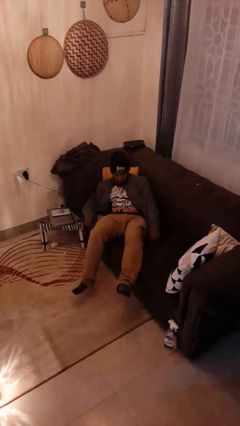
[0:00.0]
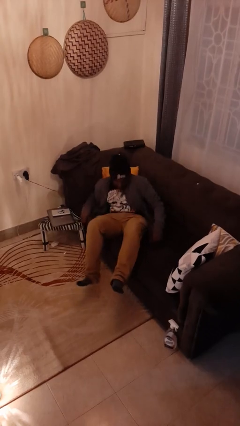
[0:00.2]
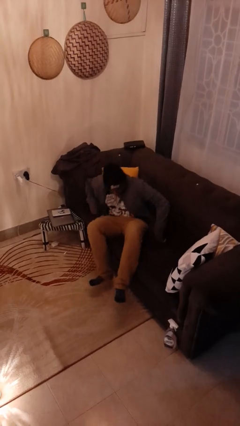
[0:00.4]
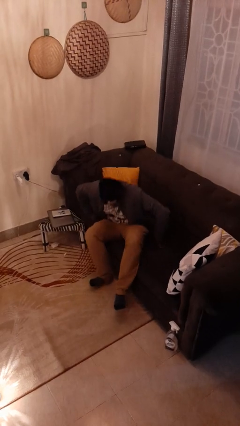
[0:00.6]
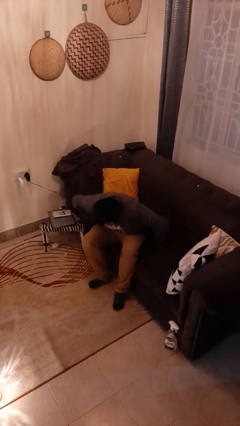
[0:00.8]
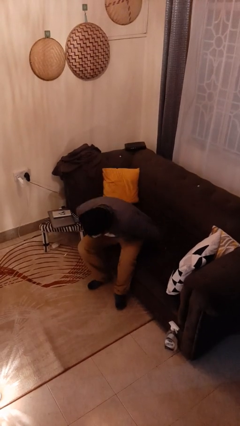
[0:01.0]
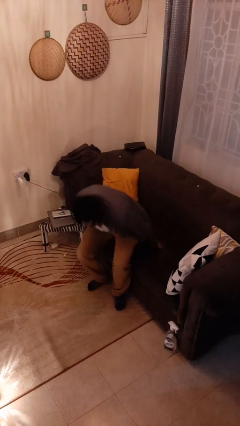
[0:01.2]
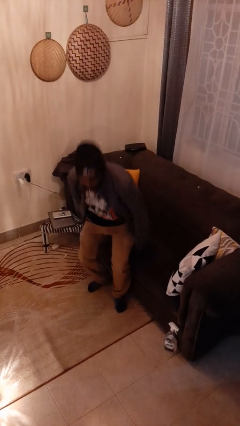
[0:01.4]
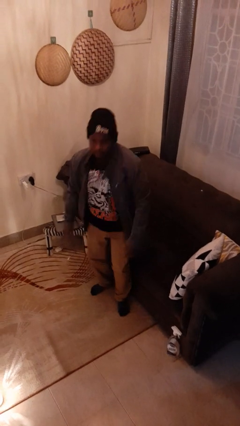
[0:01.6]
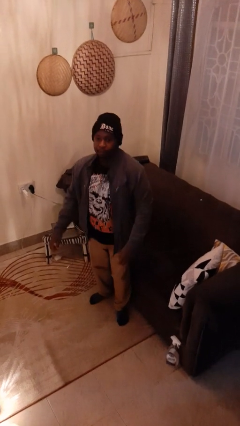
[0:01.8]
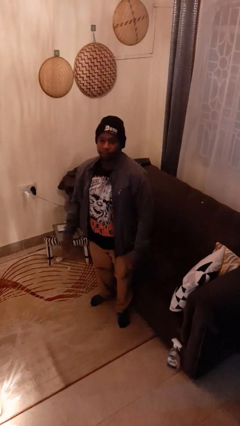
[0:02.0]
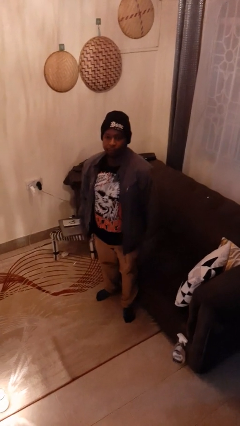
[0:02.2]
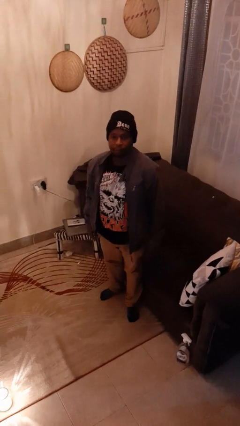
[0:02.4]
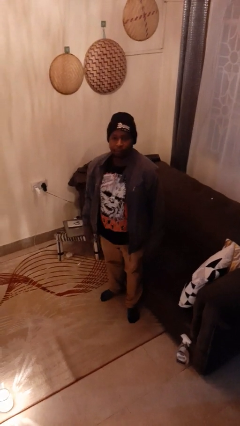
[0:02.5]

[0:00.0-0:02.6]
person stands up

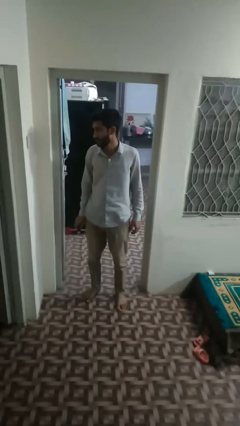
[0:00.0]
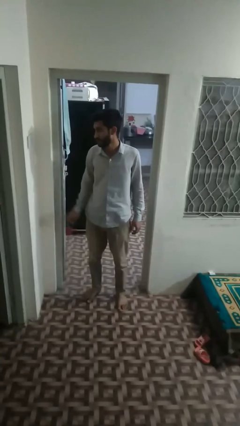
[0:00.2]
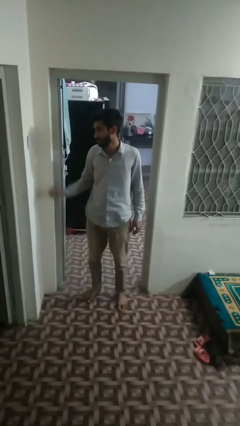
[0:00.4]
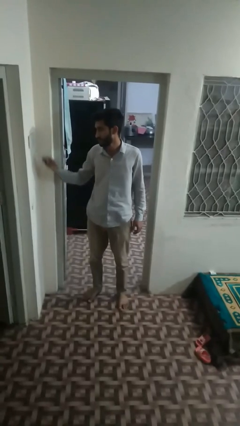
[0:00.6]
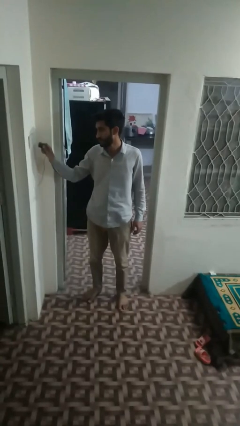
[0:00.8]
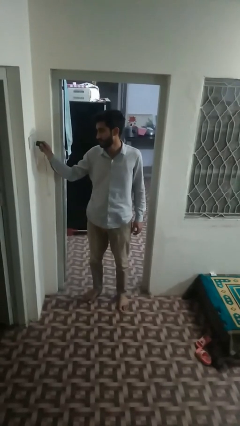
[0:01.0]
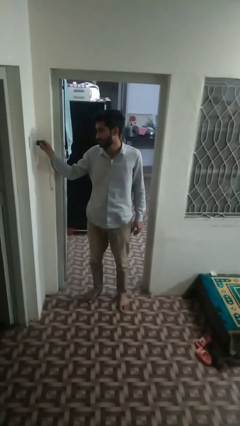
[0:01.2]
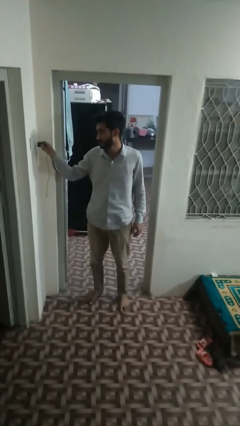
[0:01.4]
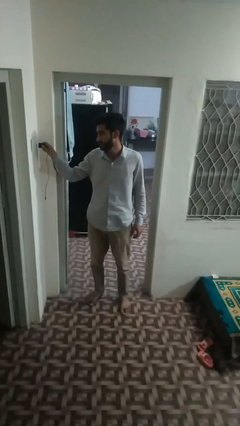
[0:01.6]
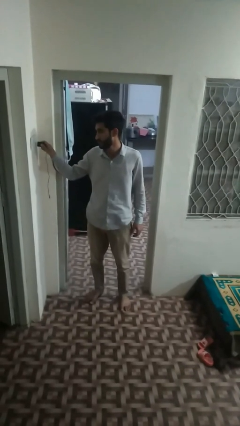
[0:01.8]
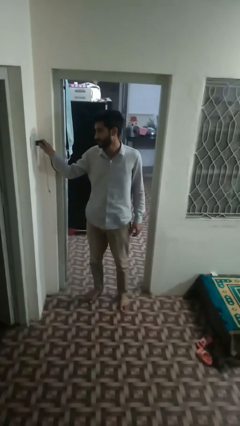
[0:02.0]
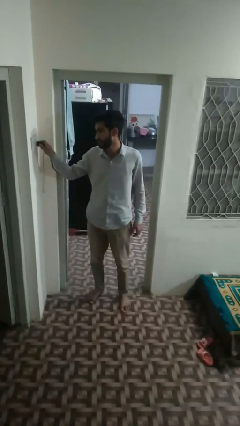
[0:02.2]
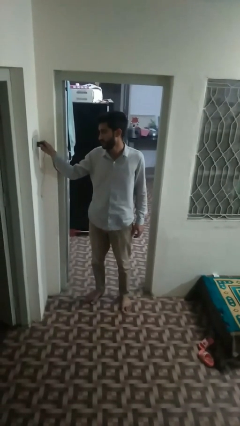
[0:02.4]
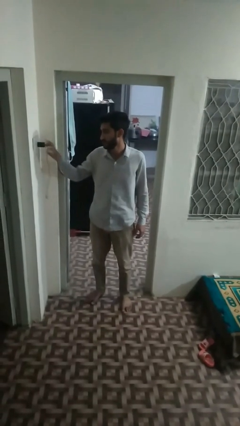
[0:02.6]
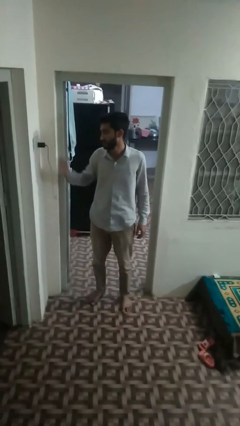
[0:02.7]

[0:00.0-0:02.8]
person plugs into electrical socket

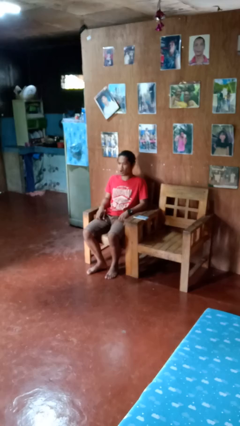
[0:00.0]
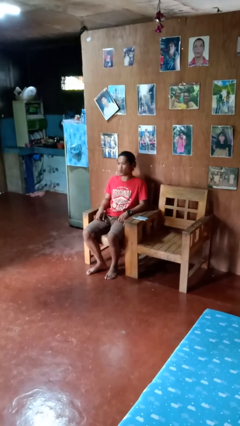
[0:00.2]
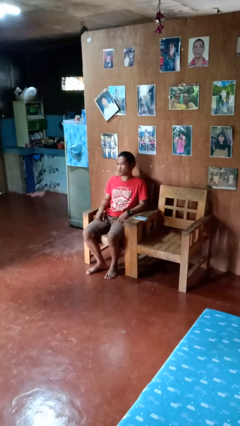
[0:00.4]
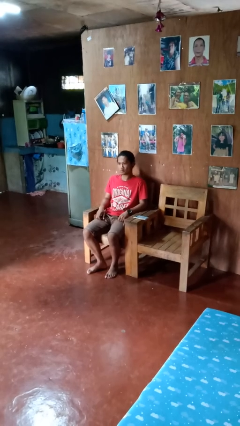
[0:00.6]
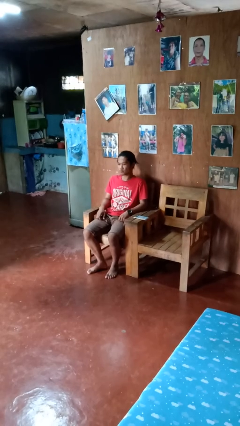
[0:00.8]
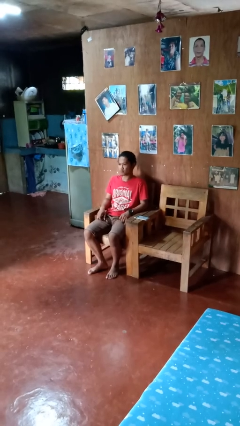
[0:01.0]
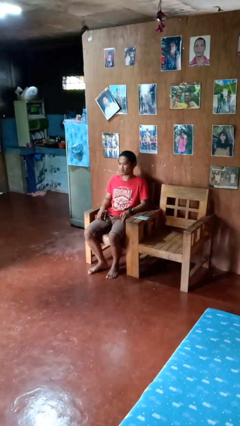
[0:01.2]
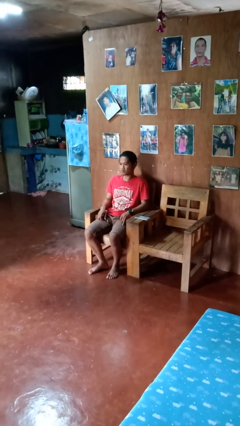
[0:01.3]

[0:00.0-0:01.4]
person shakes head

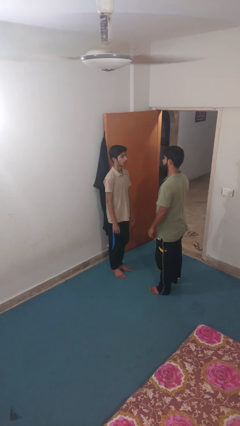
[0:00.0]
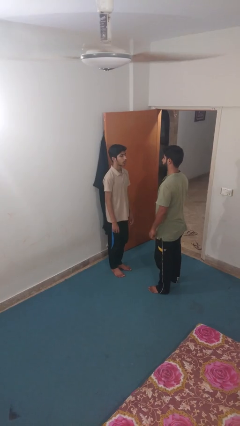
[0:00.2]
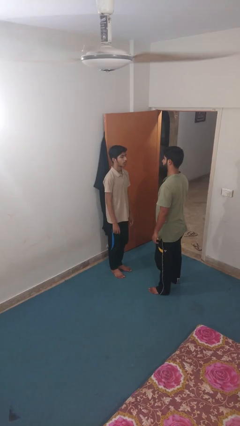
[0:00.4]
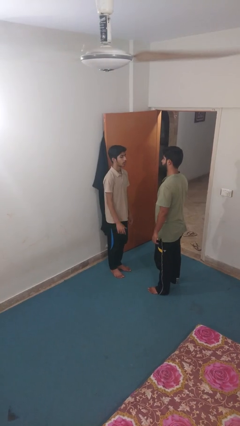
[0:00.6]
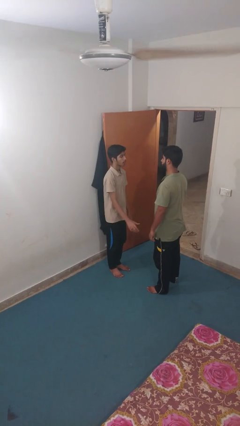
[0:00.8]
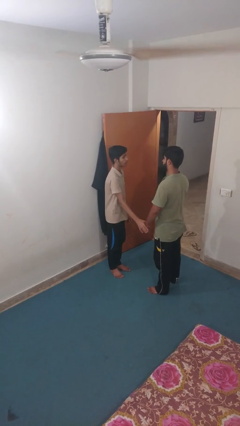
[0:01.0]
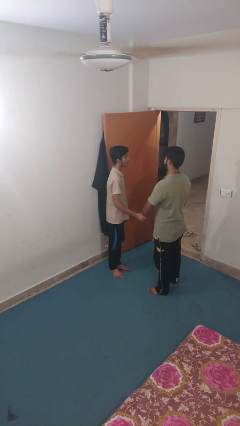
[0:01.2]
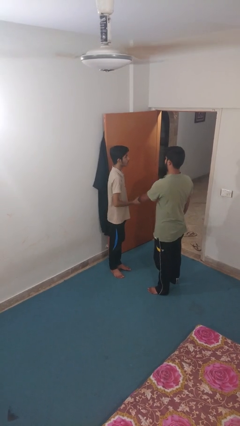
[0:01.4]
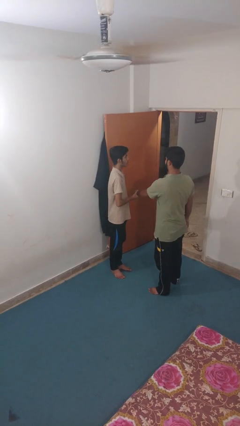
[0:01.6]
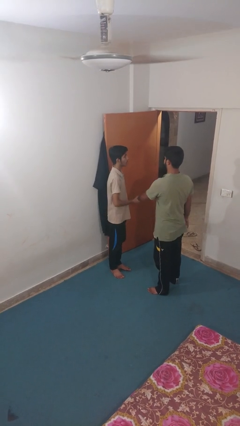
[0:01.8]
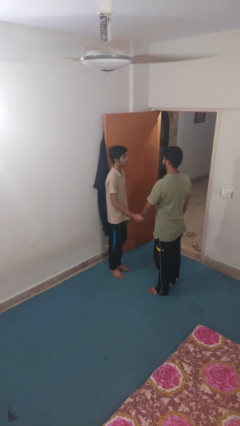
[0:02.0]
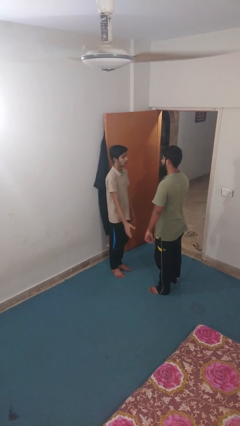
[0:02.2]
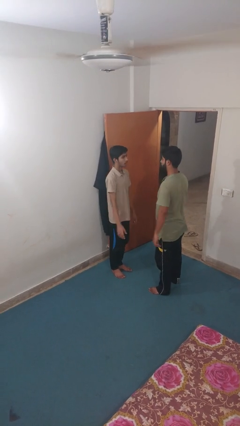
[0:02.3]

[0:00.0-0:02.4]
person grabs person by forearm

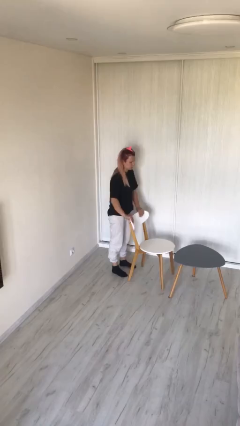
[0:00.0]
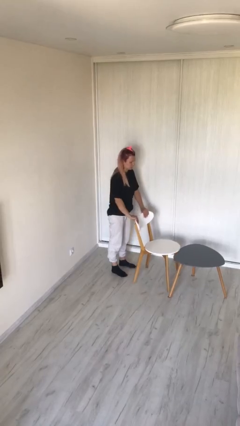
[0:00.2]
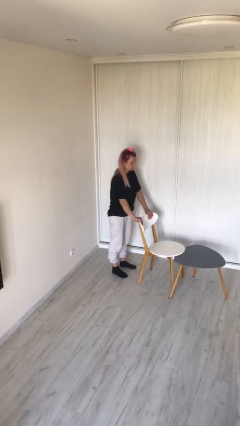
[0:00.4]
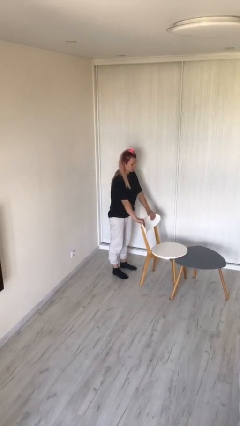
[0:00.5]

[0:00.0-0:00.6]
person pushes in chair

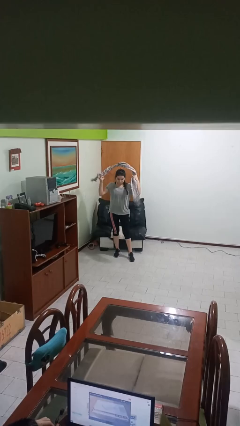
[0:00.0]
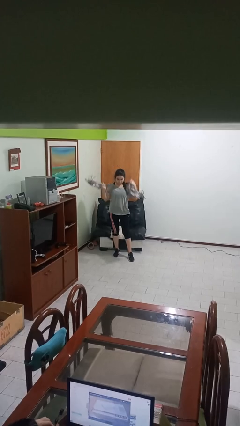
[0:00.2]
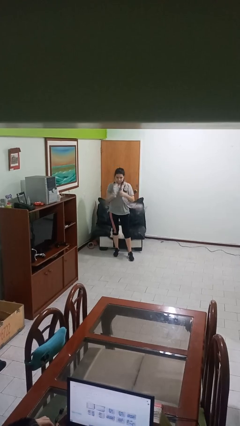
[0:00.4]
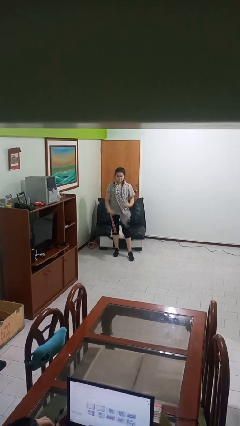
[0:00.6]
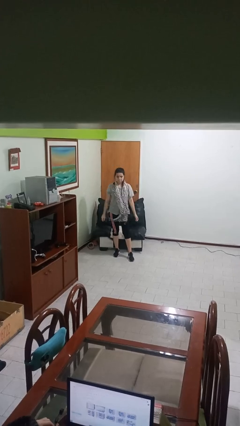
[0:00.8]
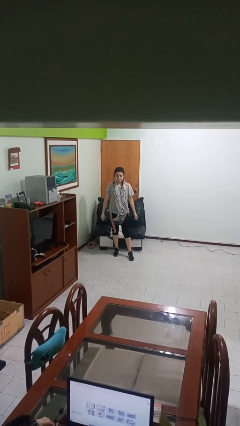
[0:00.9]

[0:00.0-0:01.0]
person puts on scarf

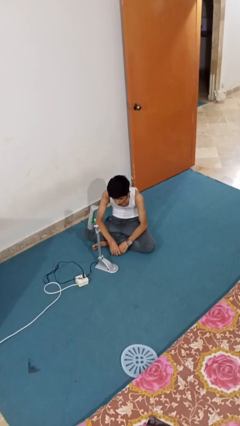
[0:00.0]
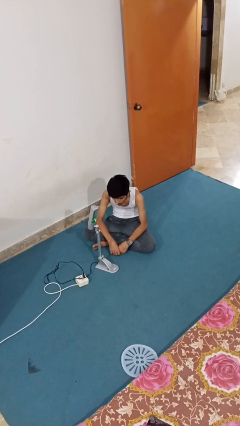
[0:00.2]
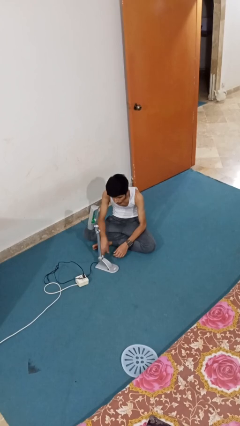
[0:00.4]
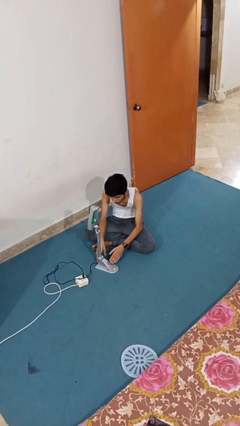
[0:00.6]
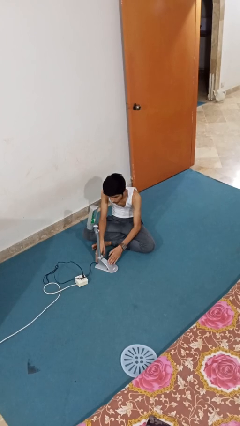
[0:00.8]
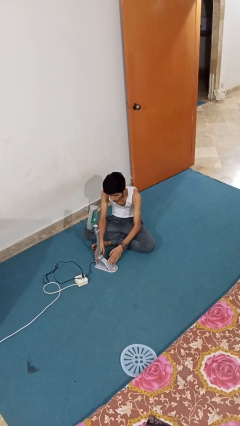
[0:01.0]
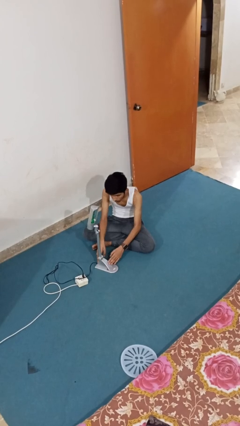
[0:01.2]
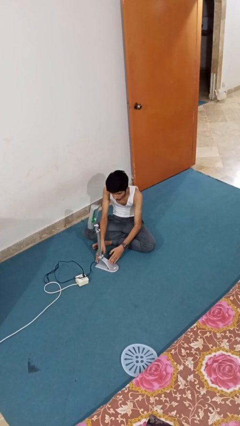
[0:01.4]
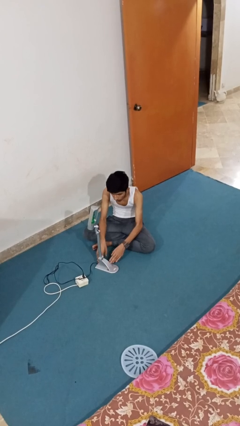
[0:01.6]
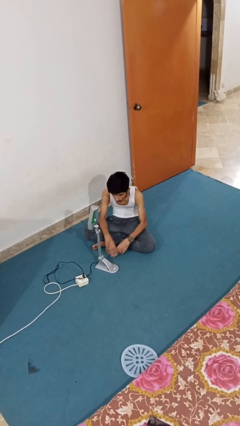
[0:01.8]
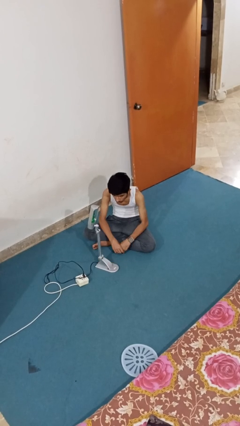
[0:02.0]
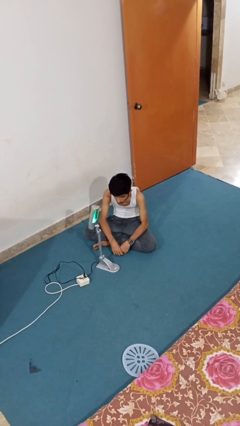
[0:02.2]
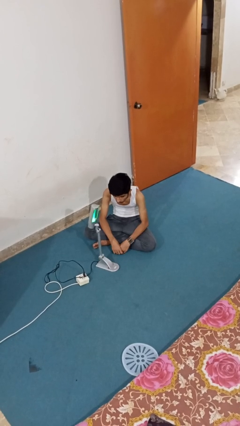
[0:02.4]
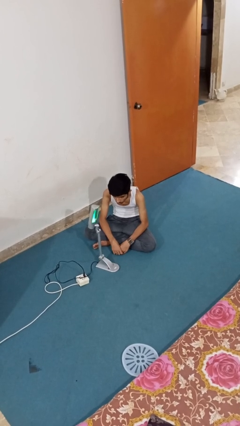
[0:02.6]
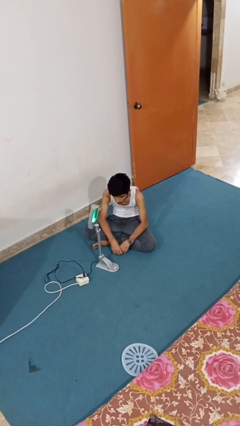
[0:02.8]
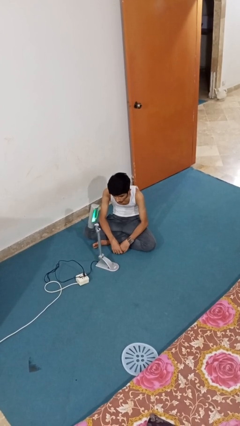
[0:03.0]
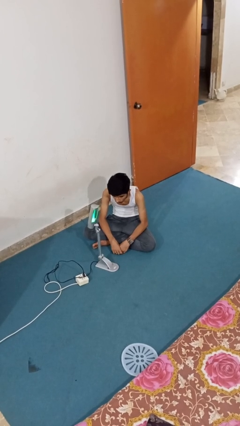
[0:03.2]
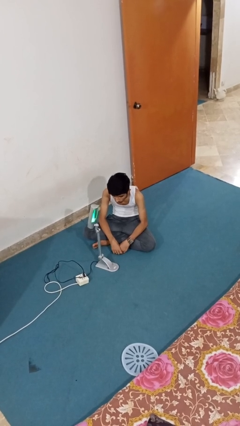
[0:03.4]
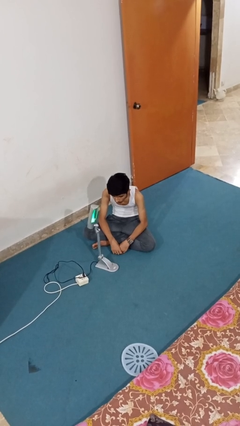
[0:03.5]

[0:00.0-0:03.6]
person turns on lamp

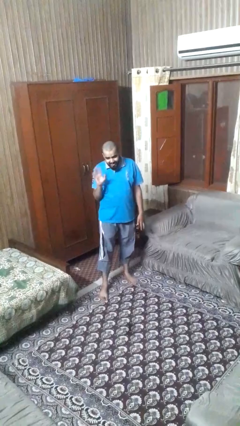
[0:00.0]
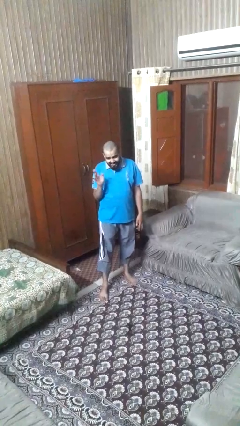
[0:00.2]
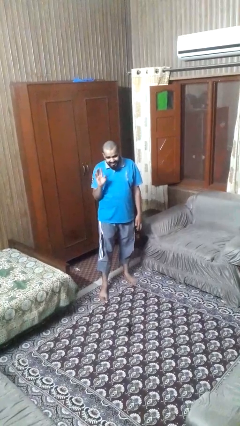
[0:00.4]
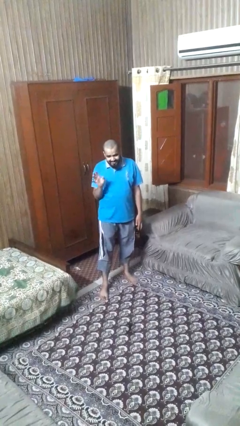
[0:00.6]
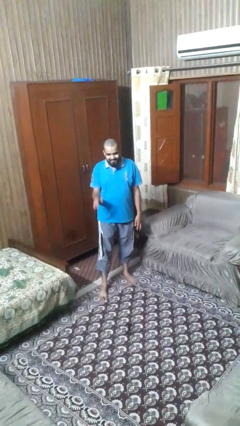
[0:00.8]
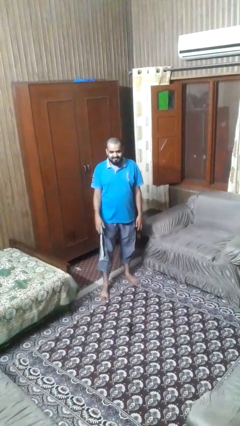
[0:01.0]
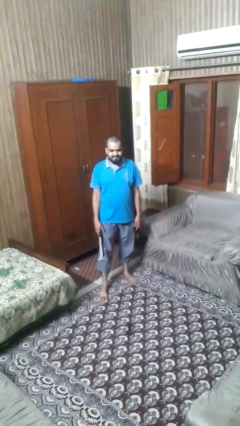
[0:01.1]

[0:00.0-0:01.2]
person waves at person

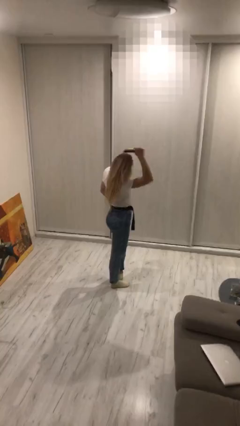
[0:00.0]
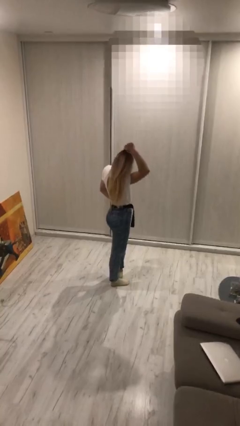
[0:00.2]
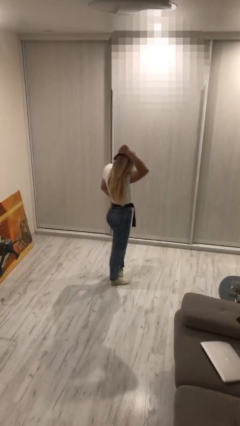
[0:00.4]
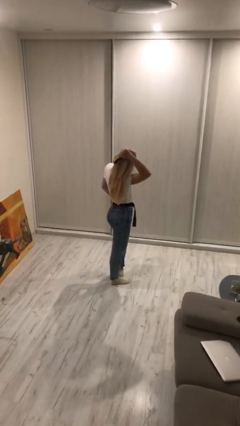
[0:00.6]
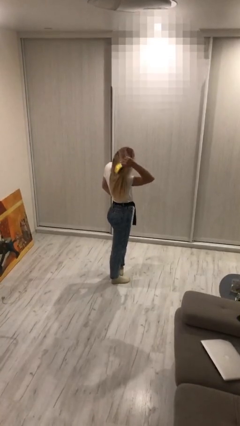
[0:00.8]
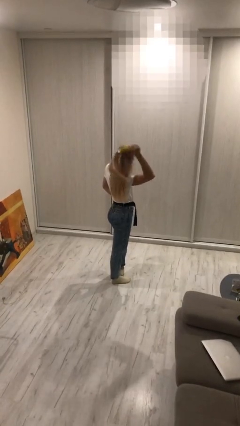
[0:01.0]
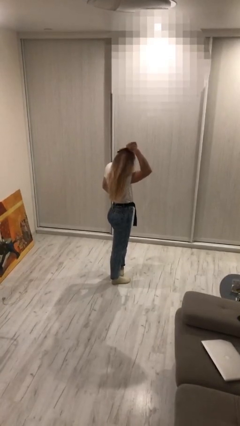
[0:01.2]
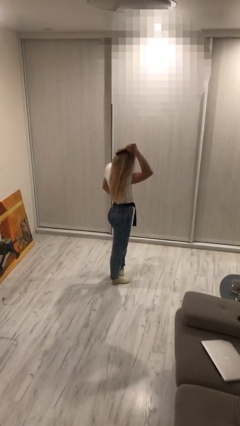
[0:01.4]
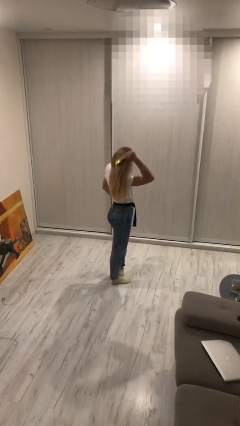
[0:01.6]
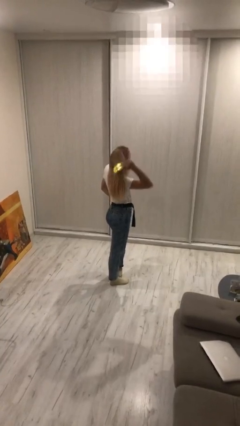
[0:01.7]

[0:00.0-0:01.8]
person brushes hair
